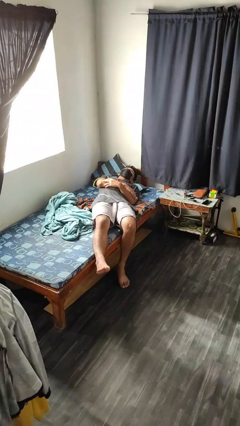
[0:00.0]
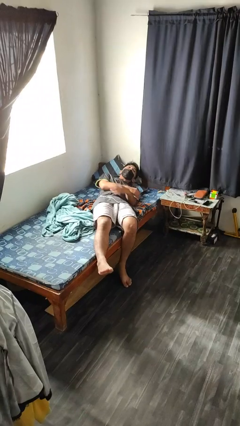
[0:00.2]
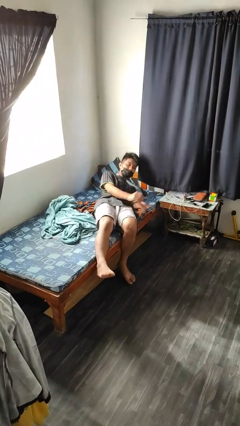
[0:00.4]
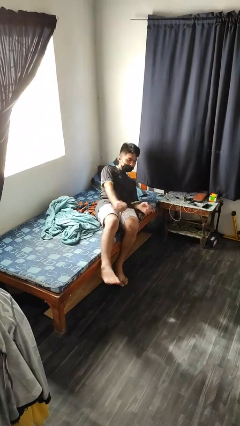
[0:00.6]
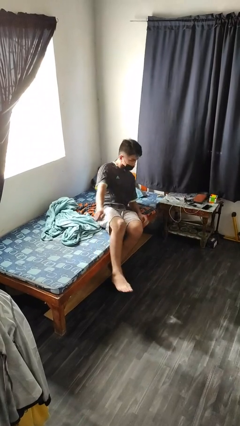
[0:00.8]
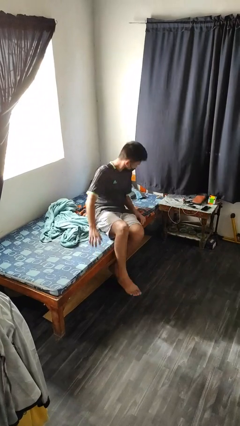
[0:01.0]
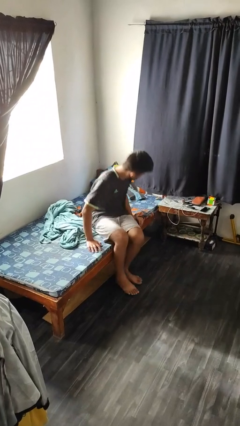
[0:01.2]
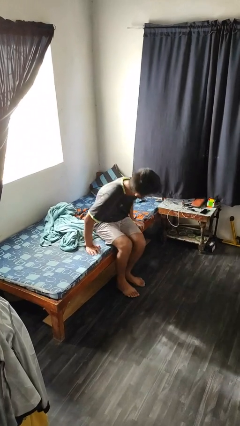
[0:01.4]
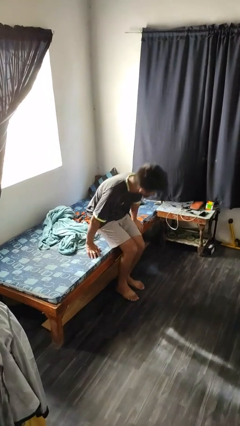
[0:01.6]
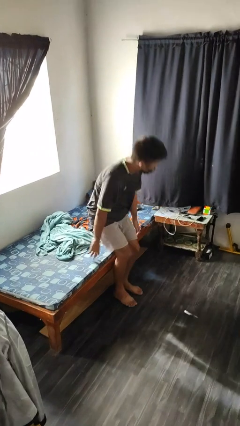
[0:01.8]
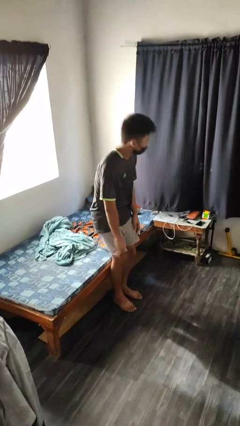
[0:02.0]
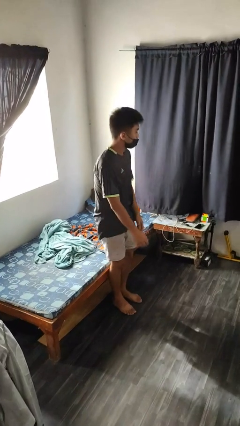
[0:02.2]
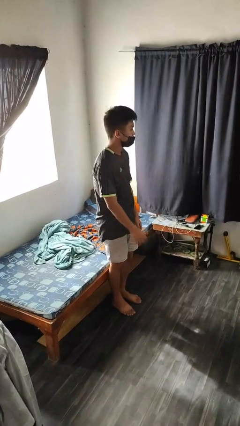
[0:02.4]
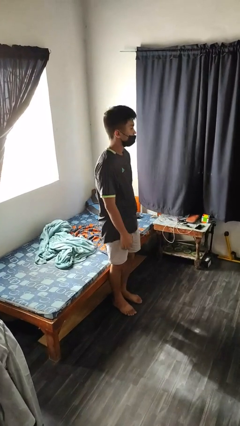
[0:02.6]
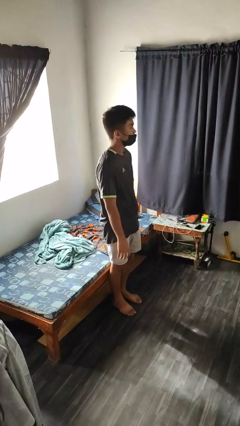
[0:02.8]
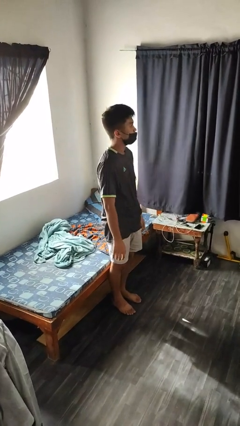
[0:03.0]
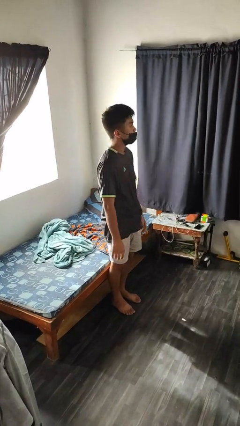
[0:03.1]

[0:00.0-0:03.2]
person stands up

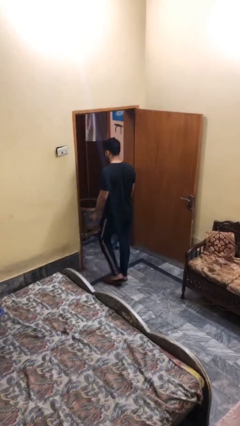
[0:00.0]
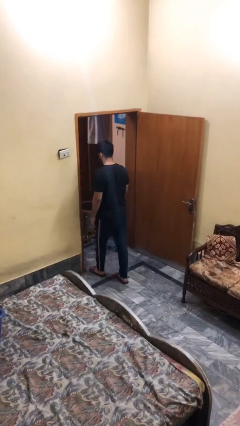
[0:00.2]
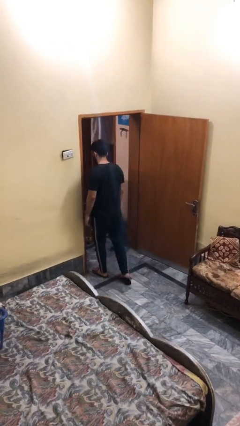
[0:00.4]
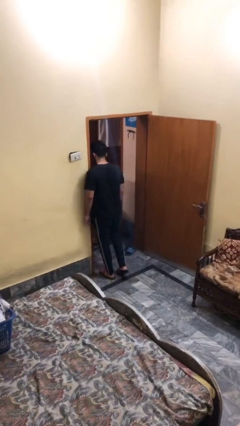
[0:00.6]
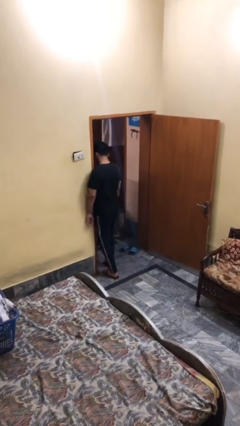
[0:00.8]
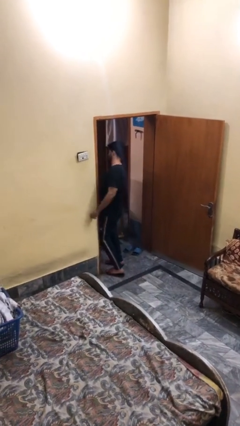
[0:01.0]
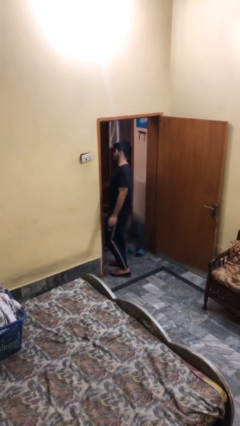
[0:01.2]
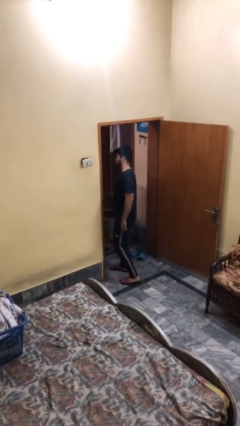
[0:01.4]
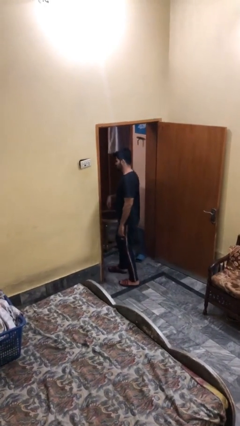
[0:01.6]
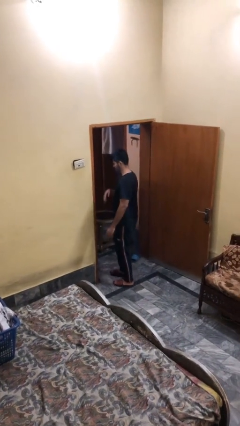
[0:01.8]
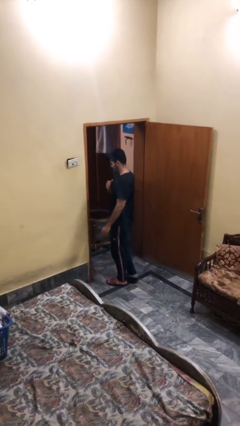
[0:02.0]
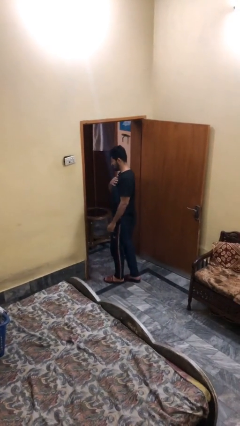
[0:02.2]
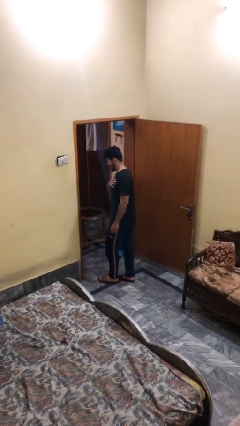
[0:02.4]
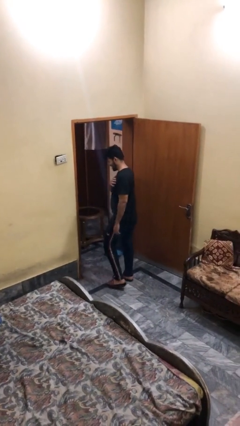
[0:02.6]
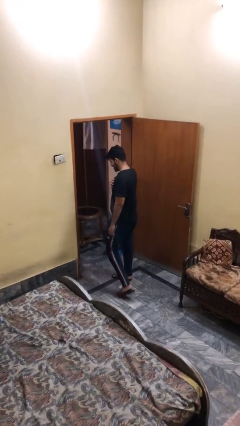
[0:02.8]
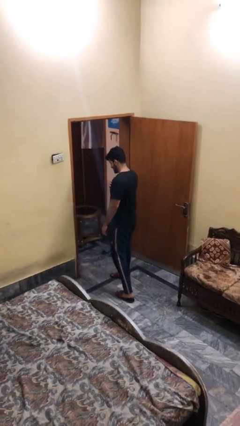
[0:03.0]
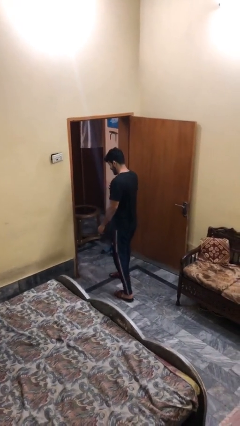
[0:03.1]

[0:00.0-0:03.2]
person bumps into wall

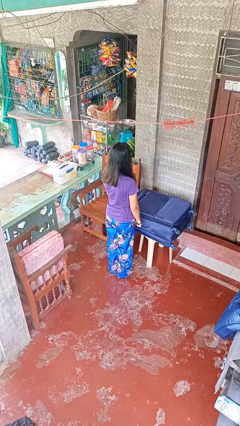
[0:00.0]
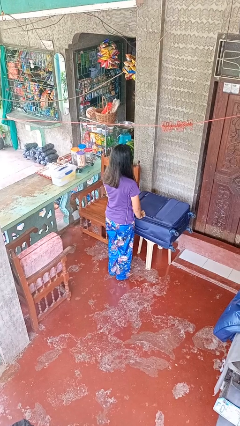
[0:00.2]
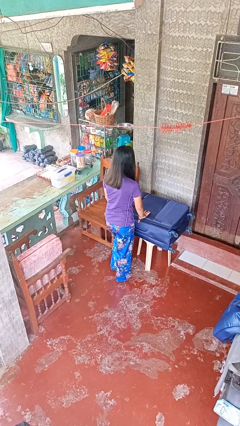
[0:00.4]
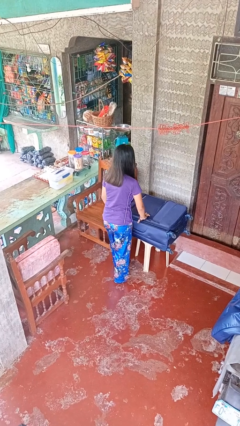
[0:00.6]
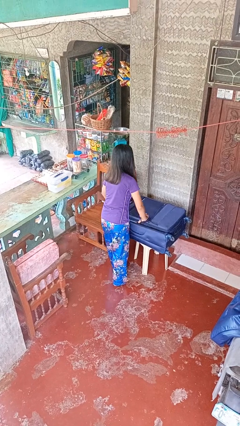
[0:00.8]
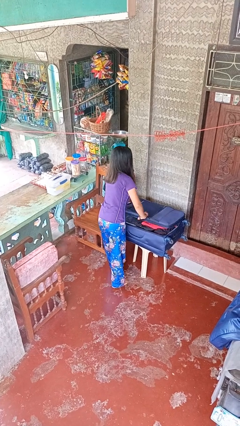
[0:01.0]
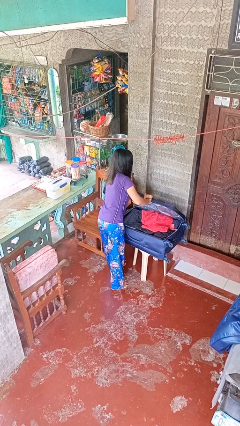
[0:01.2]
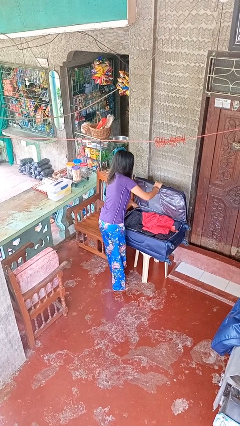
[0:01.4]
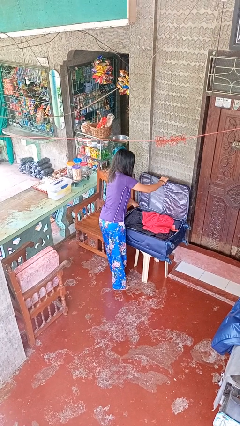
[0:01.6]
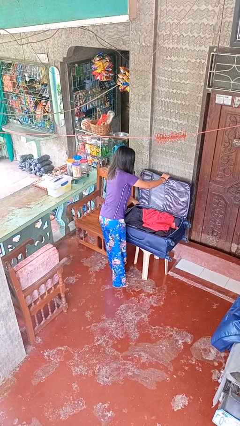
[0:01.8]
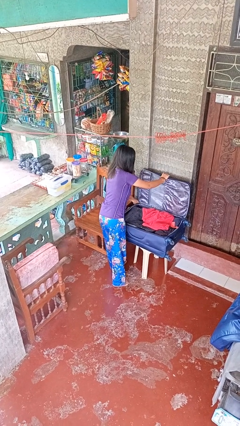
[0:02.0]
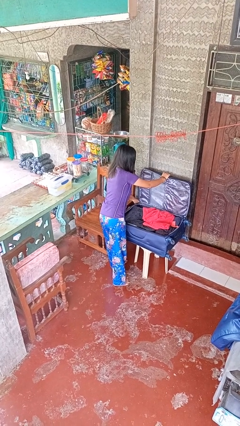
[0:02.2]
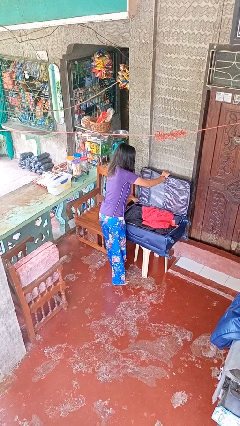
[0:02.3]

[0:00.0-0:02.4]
person opens suitcase

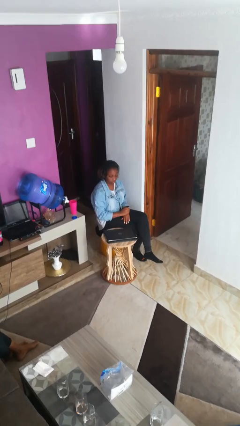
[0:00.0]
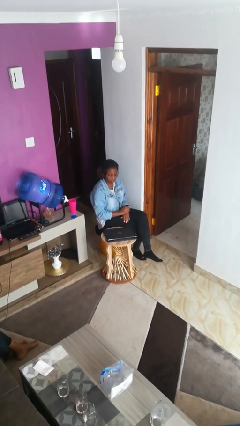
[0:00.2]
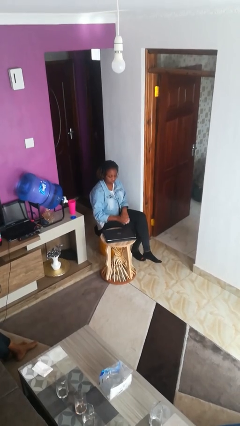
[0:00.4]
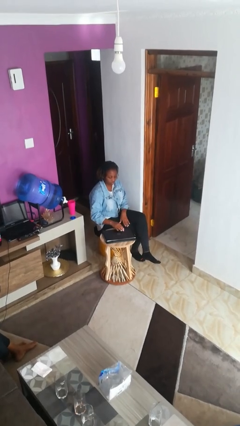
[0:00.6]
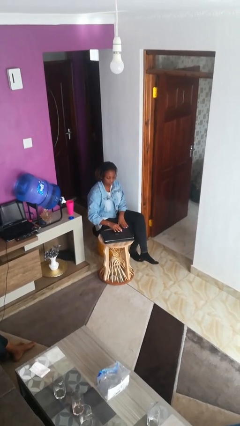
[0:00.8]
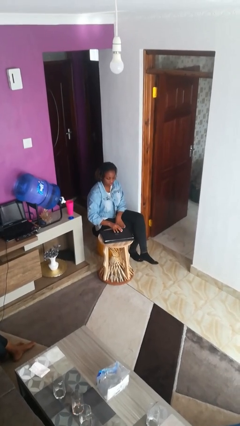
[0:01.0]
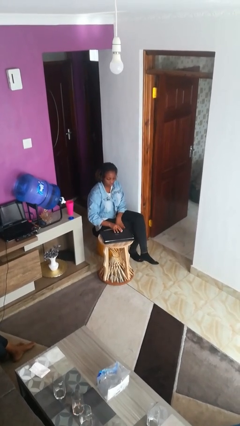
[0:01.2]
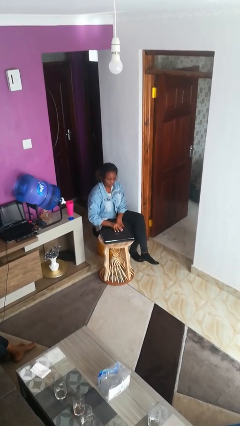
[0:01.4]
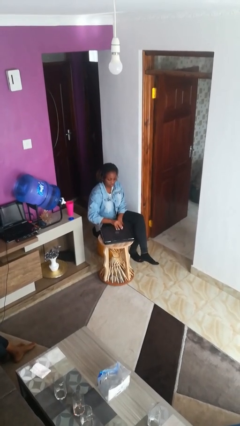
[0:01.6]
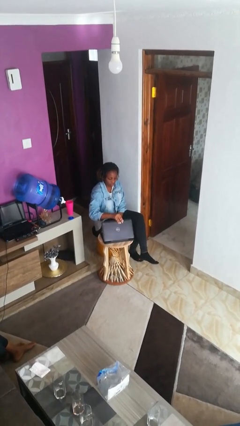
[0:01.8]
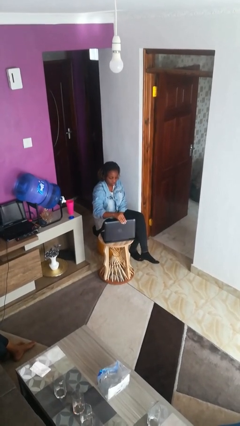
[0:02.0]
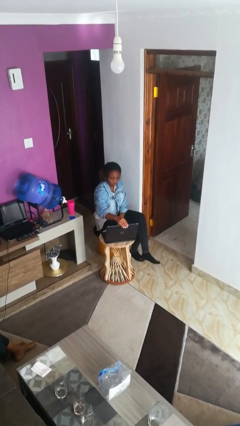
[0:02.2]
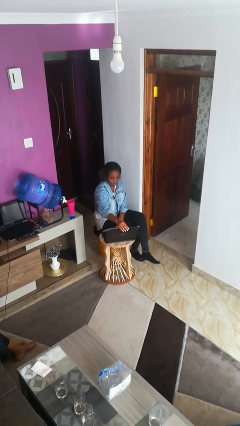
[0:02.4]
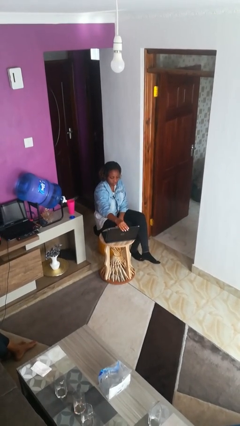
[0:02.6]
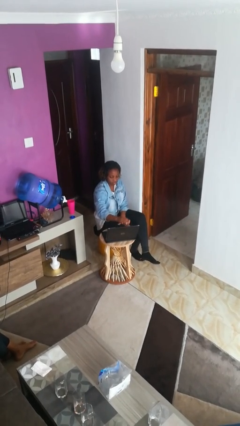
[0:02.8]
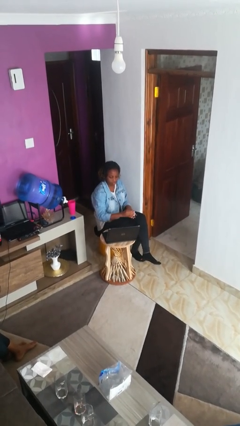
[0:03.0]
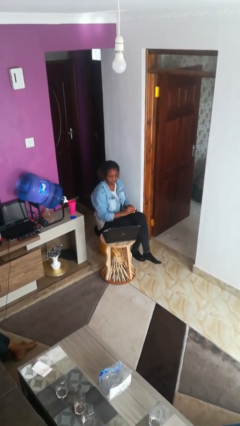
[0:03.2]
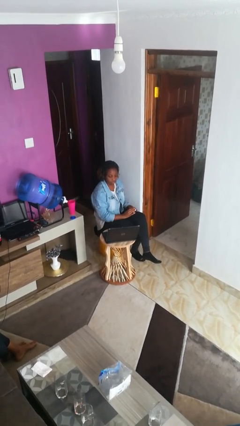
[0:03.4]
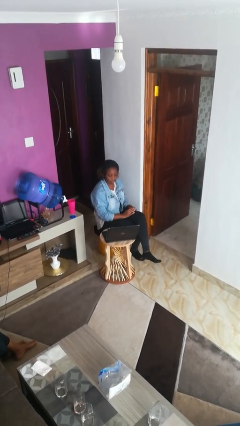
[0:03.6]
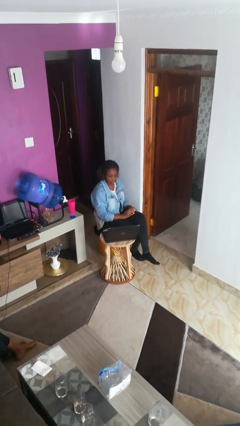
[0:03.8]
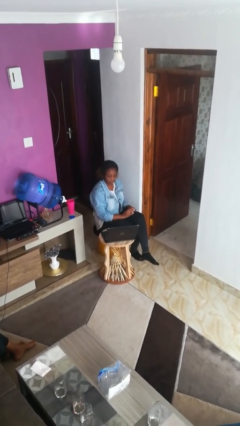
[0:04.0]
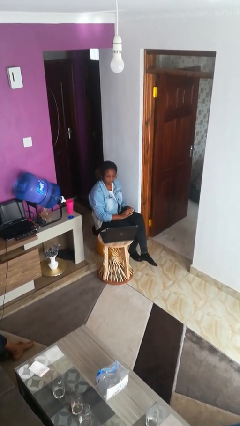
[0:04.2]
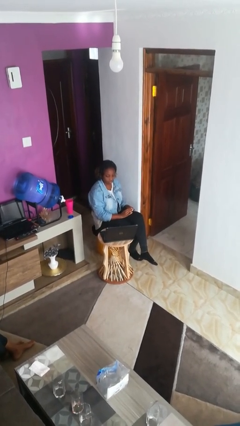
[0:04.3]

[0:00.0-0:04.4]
person opens laptop

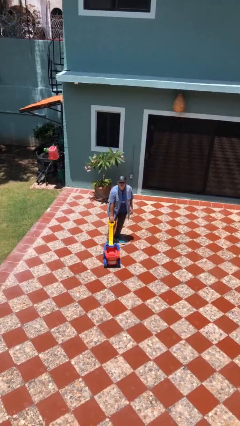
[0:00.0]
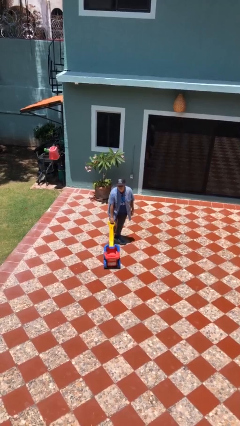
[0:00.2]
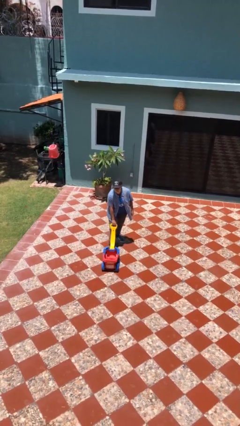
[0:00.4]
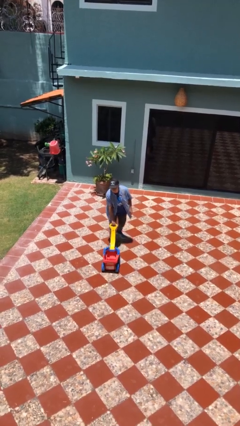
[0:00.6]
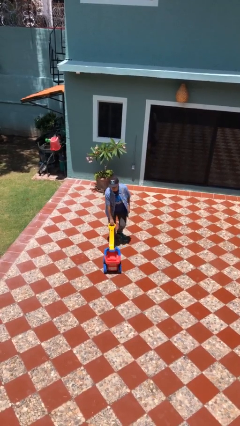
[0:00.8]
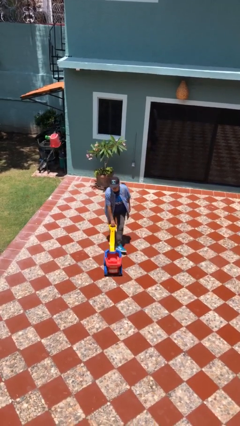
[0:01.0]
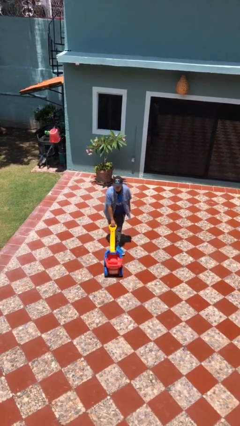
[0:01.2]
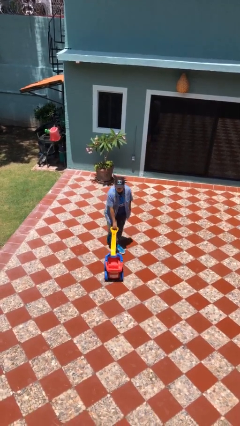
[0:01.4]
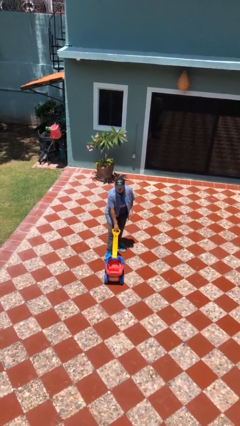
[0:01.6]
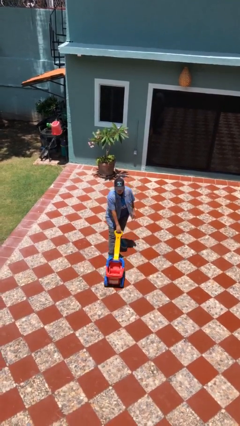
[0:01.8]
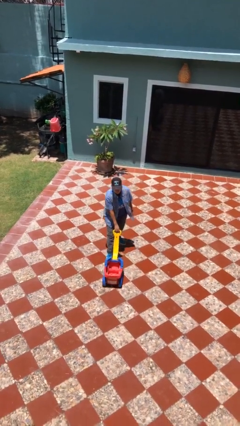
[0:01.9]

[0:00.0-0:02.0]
person pushes wheeled cart

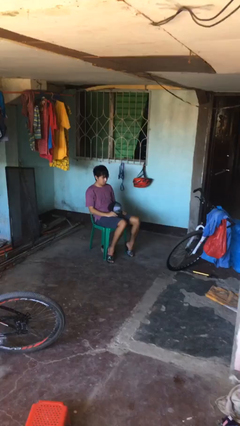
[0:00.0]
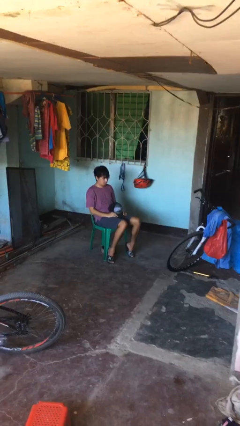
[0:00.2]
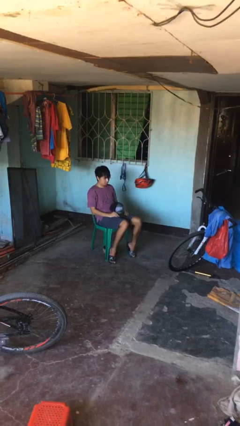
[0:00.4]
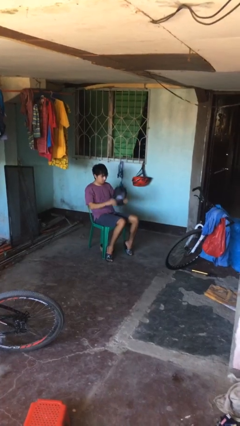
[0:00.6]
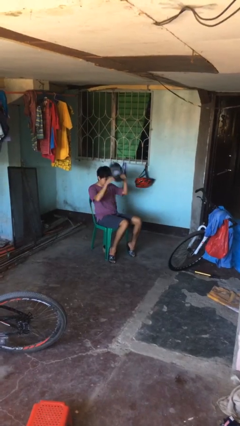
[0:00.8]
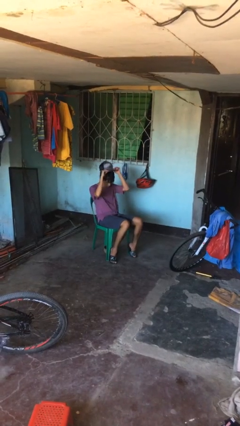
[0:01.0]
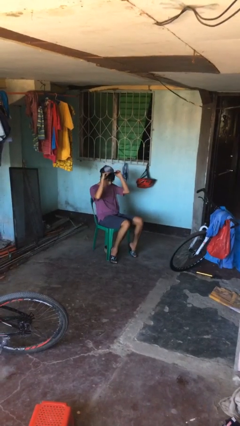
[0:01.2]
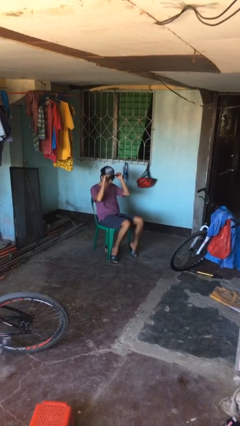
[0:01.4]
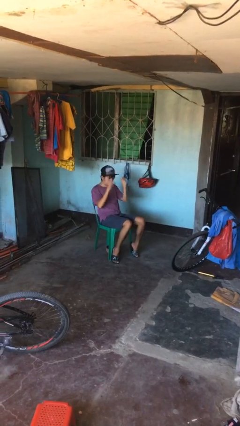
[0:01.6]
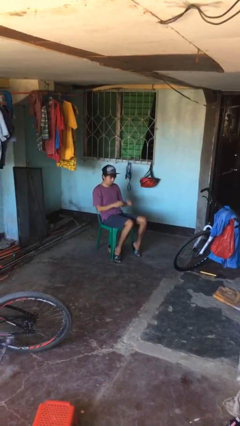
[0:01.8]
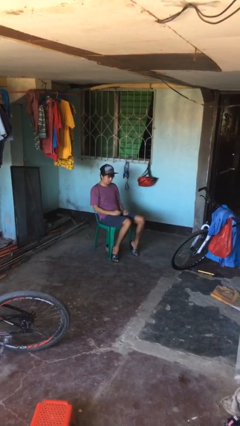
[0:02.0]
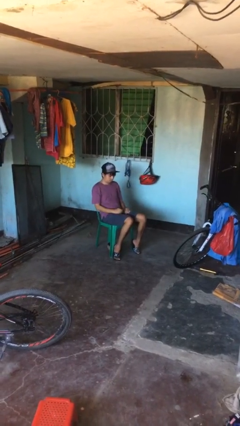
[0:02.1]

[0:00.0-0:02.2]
person puts on hat

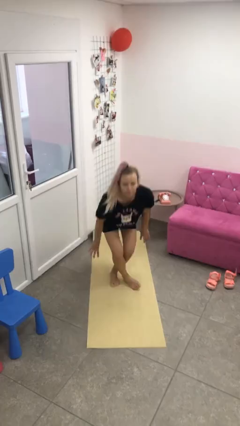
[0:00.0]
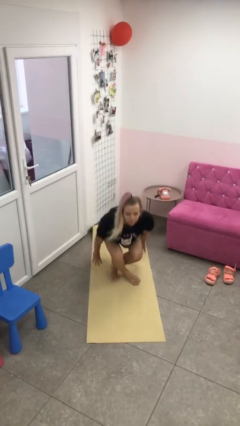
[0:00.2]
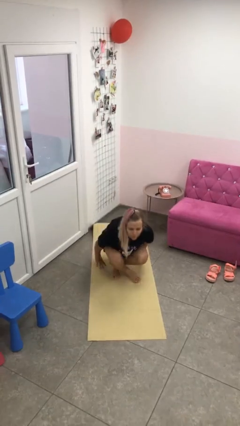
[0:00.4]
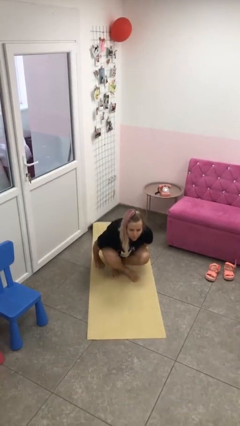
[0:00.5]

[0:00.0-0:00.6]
person sits crisscross
